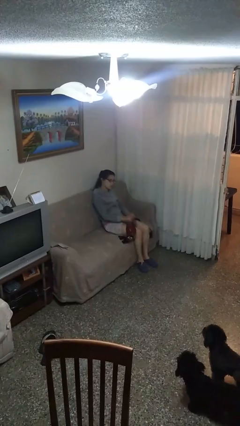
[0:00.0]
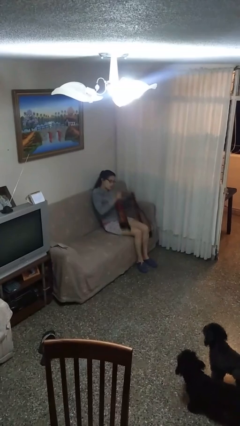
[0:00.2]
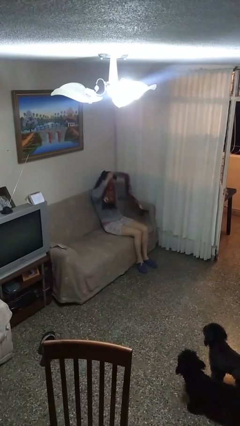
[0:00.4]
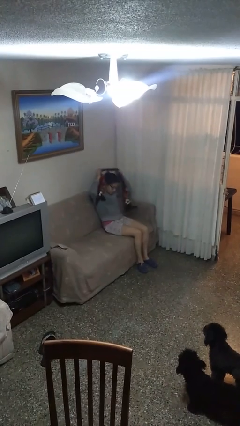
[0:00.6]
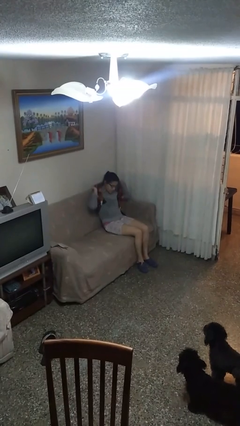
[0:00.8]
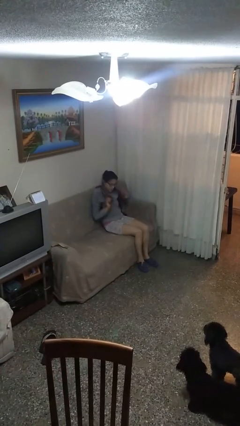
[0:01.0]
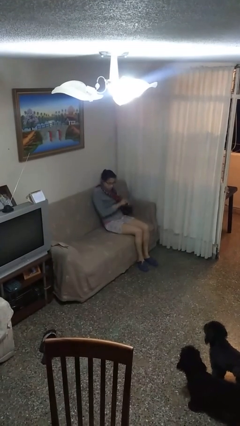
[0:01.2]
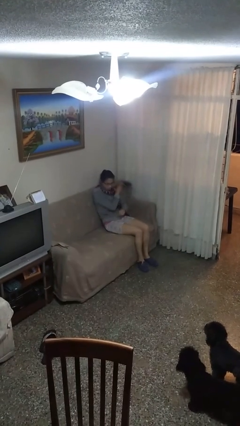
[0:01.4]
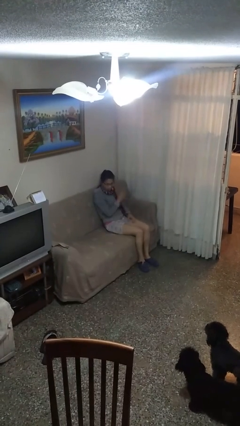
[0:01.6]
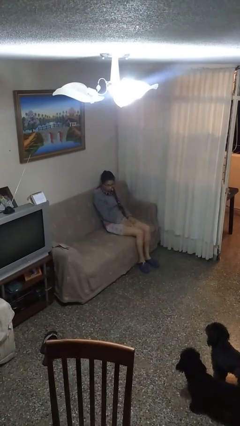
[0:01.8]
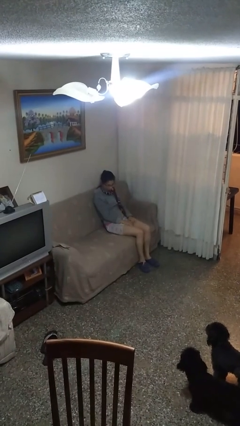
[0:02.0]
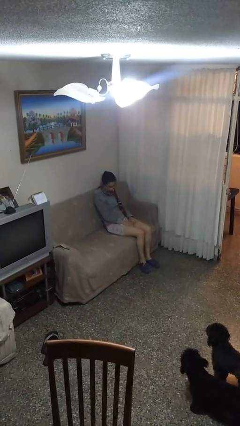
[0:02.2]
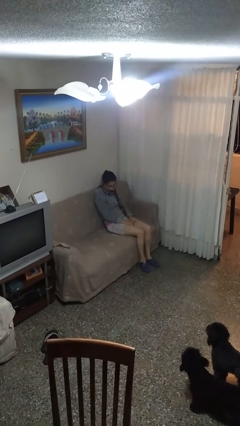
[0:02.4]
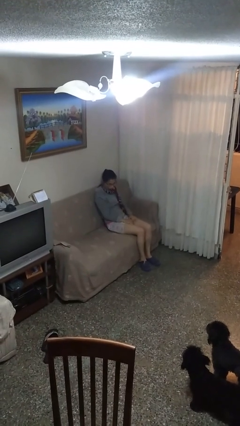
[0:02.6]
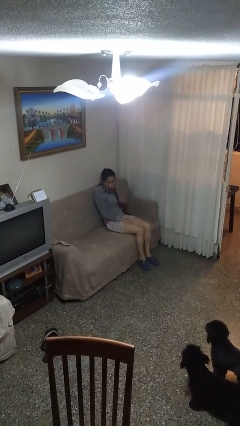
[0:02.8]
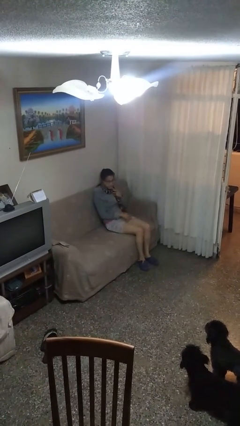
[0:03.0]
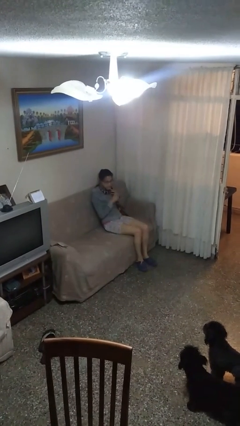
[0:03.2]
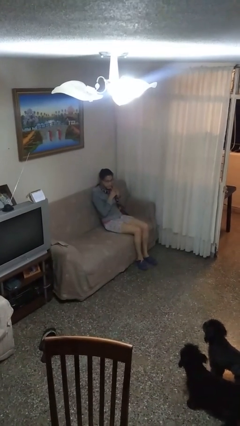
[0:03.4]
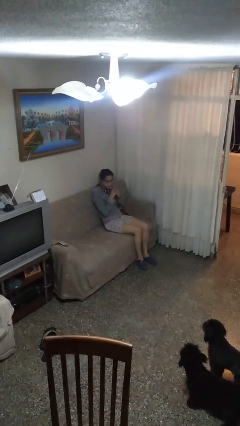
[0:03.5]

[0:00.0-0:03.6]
person puts on scarf

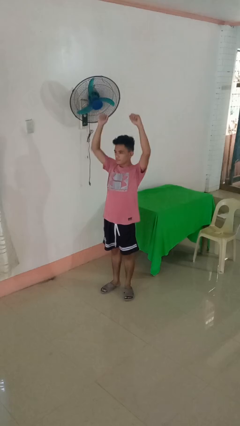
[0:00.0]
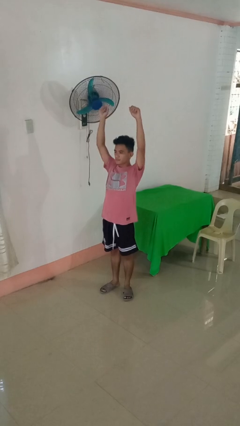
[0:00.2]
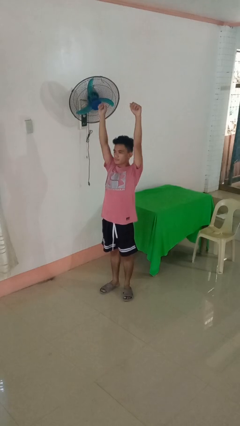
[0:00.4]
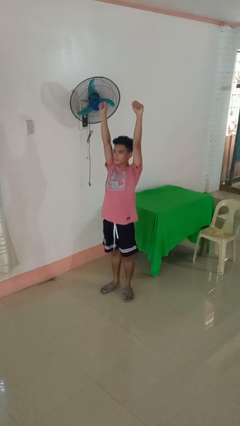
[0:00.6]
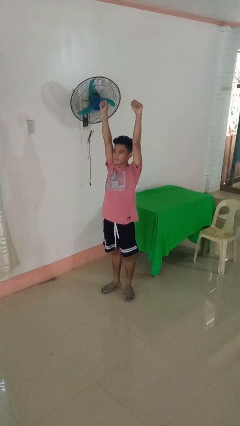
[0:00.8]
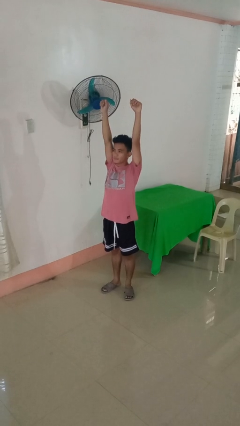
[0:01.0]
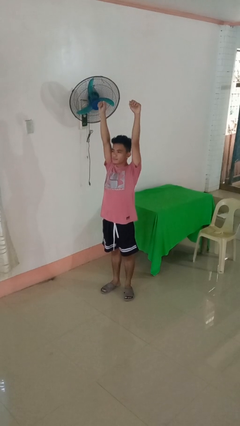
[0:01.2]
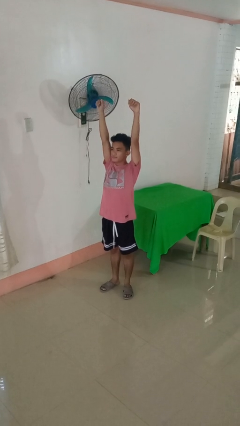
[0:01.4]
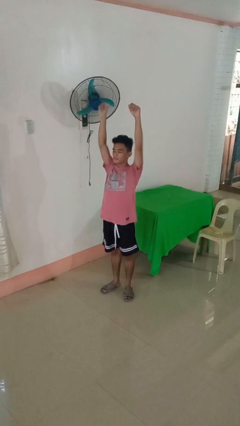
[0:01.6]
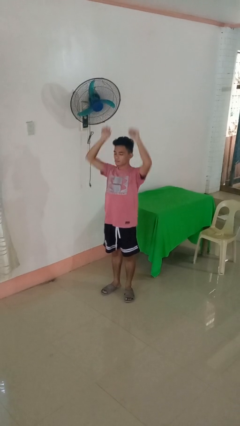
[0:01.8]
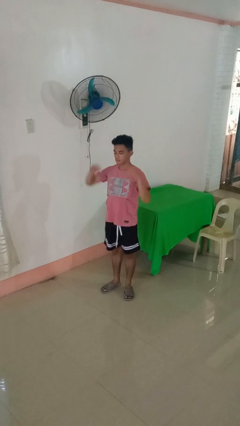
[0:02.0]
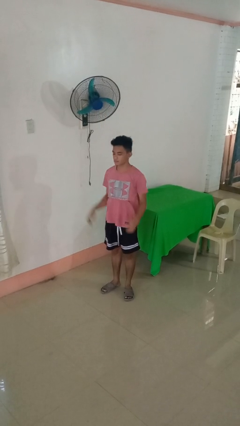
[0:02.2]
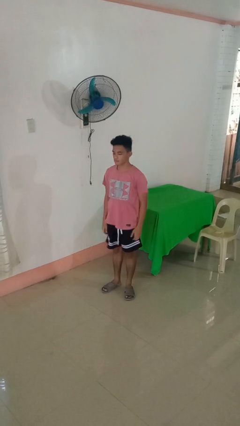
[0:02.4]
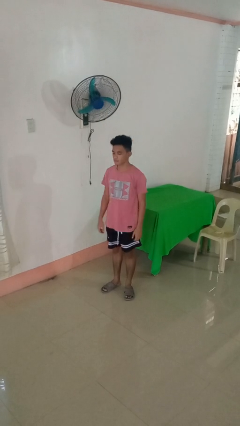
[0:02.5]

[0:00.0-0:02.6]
person stretches arms over head

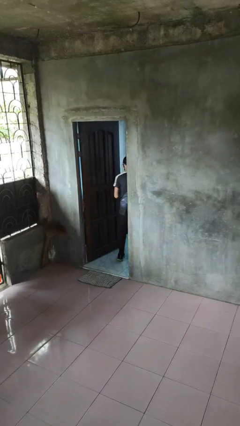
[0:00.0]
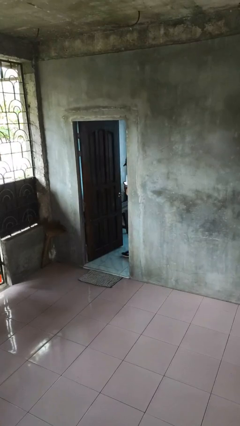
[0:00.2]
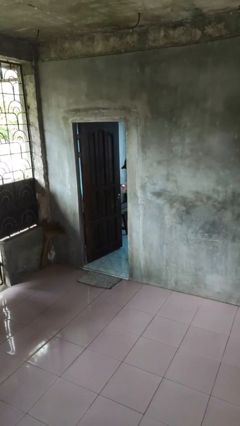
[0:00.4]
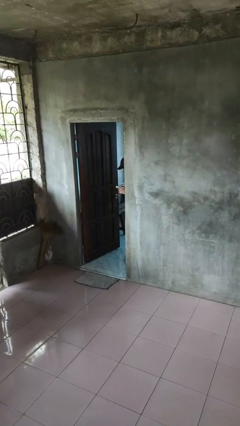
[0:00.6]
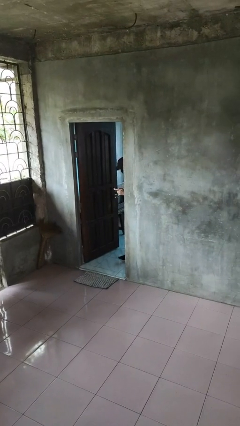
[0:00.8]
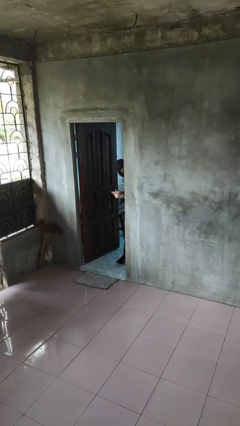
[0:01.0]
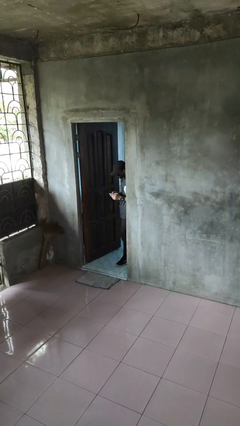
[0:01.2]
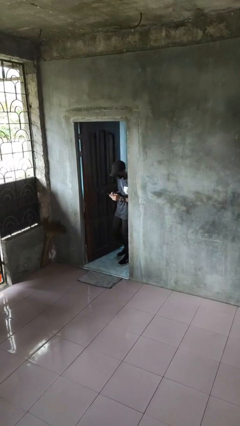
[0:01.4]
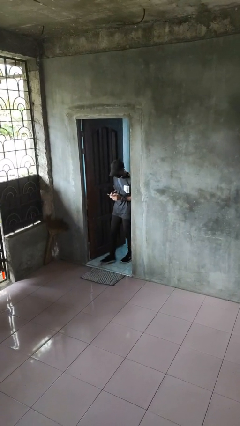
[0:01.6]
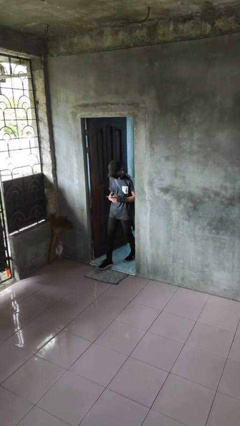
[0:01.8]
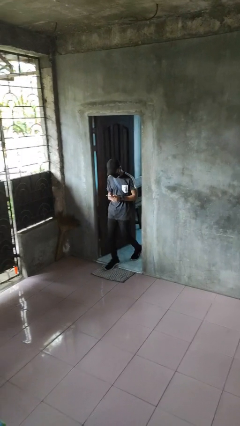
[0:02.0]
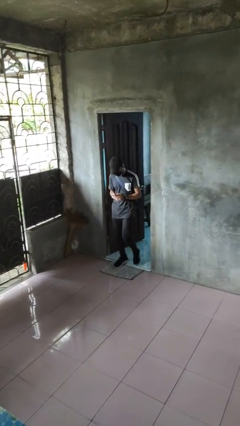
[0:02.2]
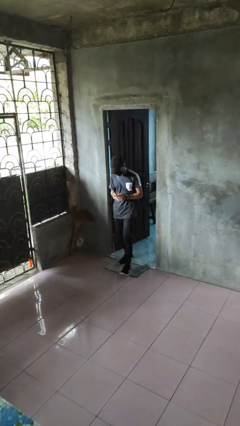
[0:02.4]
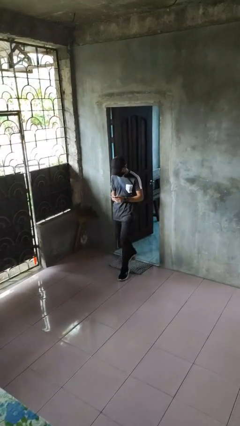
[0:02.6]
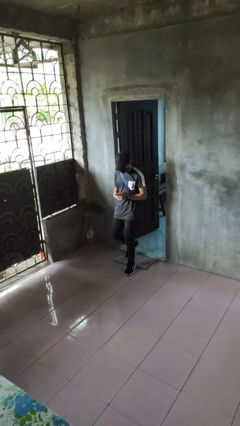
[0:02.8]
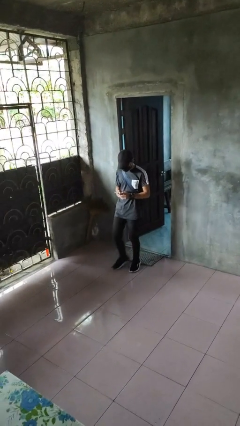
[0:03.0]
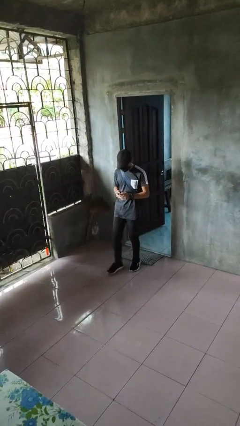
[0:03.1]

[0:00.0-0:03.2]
person enters scene through structure

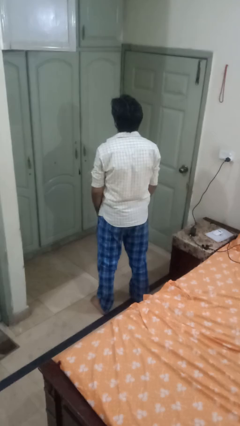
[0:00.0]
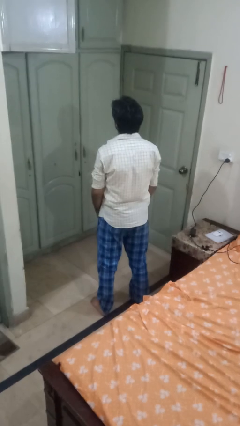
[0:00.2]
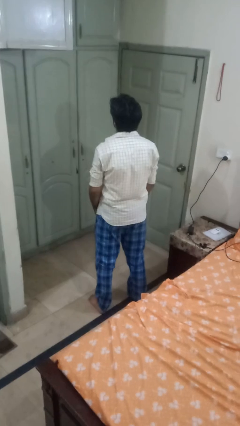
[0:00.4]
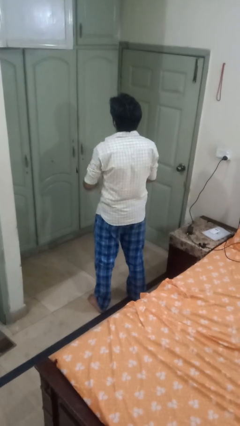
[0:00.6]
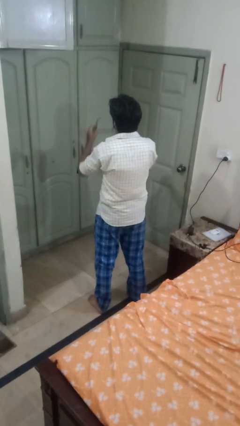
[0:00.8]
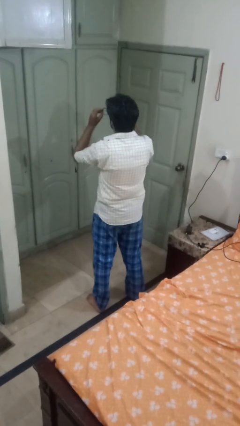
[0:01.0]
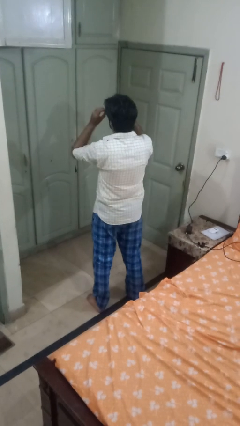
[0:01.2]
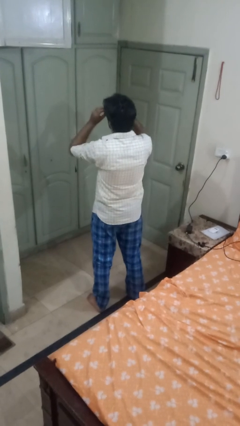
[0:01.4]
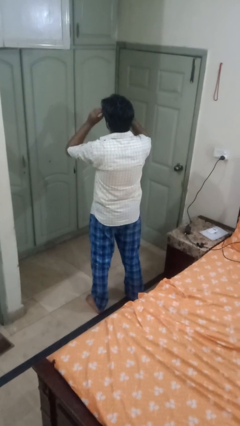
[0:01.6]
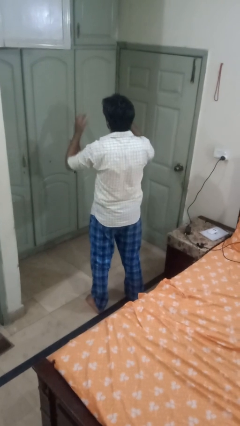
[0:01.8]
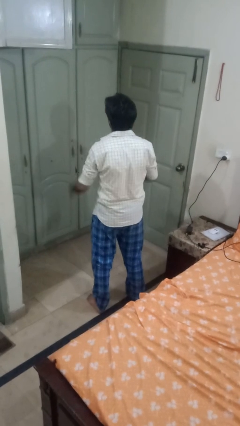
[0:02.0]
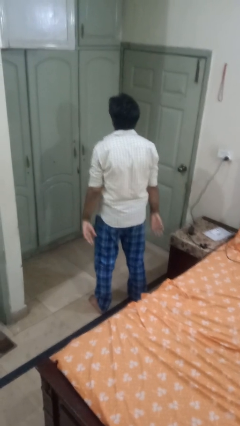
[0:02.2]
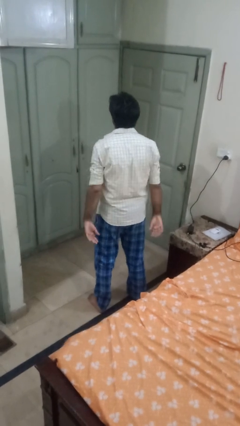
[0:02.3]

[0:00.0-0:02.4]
person puts on glasses

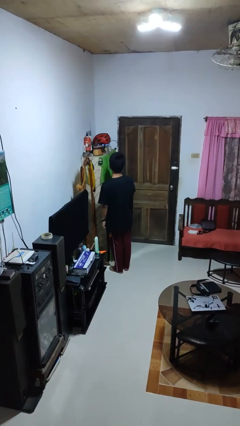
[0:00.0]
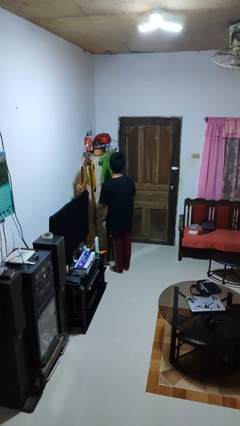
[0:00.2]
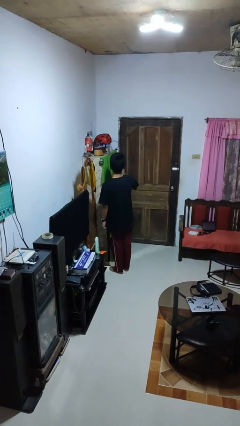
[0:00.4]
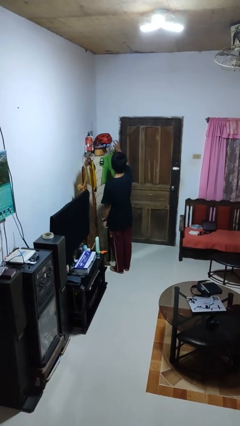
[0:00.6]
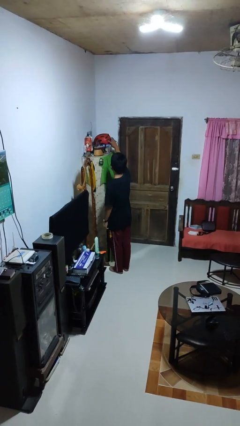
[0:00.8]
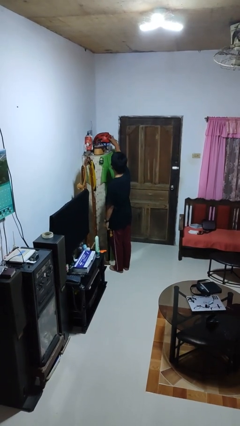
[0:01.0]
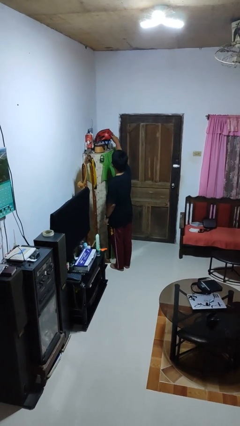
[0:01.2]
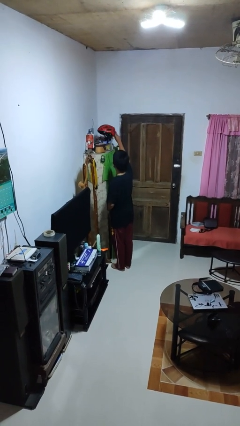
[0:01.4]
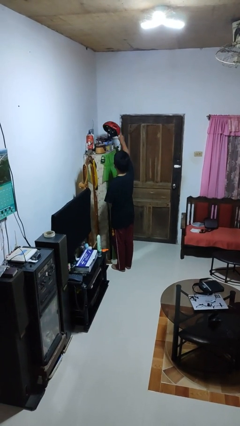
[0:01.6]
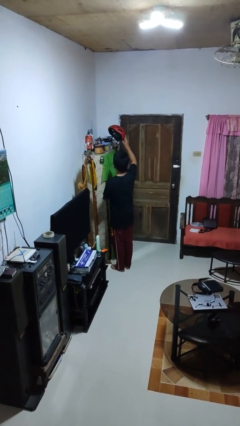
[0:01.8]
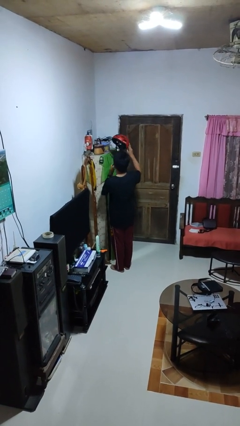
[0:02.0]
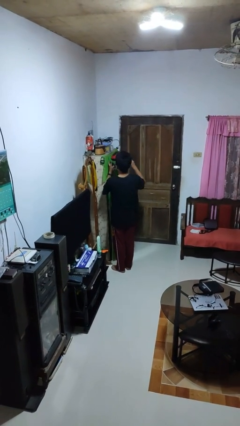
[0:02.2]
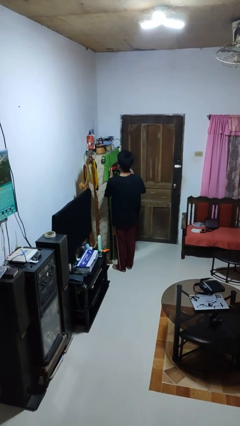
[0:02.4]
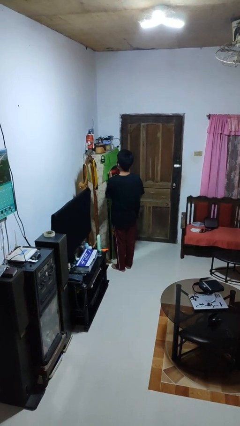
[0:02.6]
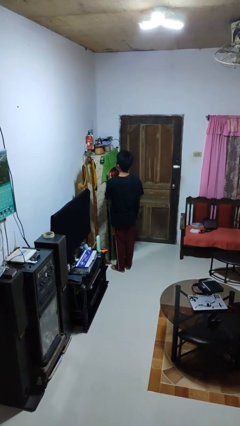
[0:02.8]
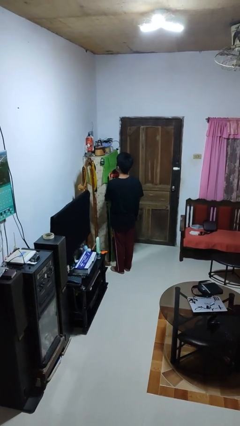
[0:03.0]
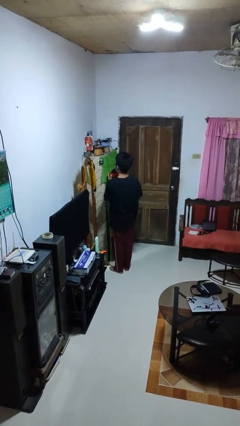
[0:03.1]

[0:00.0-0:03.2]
person picks up object from shelf

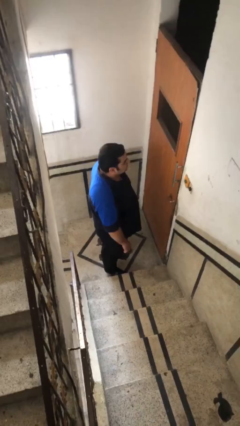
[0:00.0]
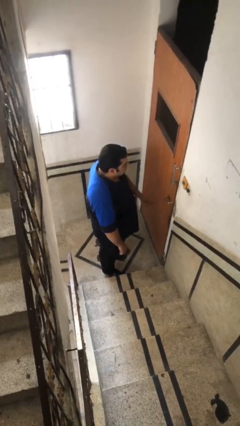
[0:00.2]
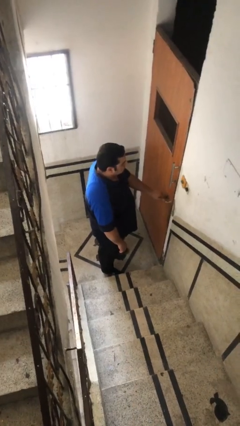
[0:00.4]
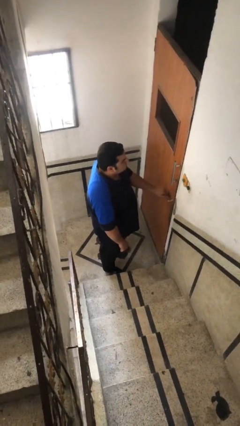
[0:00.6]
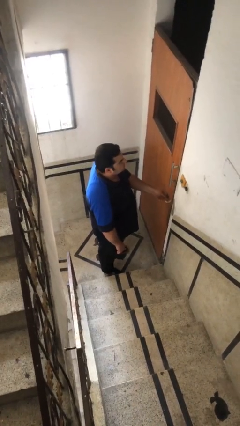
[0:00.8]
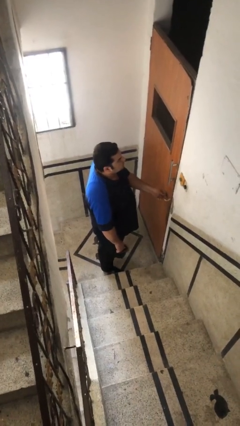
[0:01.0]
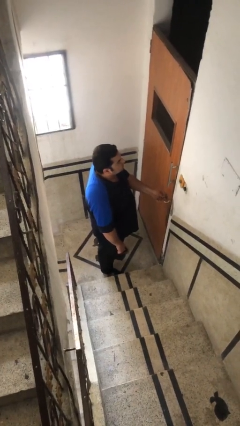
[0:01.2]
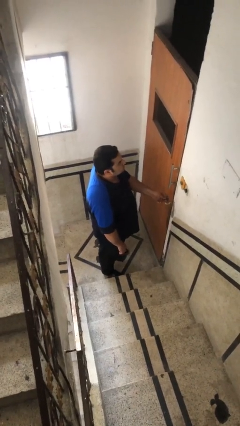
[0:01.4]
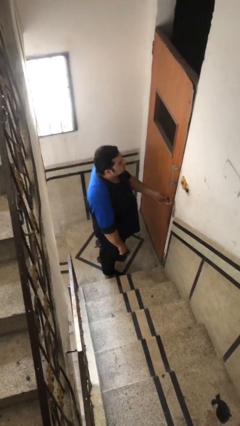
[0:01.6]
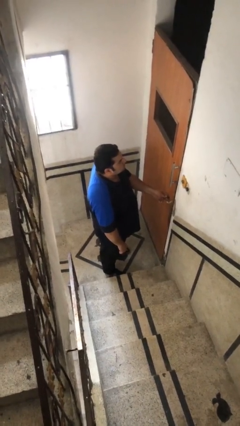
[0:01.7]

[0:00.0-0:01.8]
person unlocks door with keys

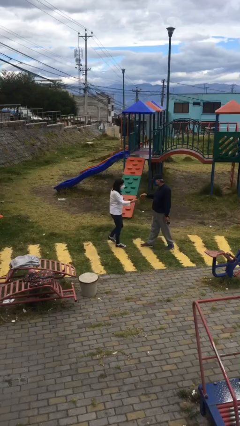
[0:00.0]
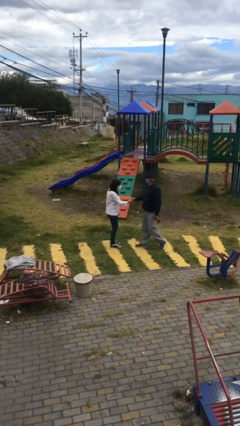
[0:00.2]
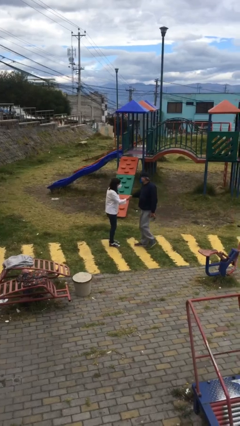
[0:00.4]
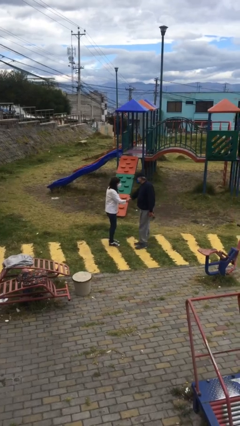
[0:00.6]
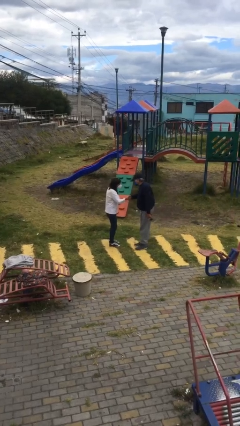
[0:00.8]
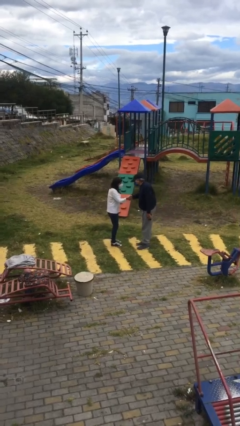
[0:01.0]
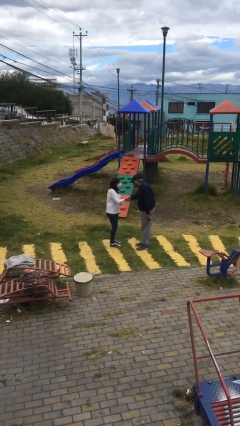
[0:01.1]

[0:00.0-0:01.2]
person shakes hand
